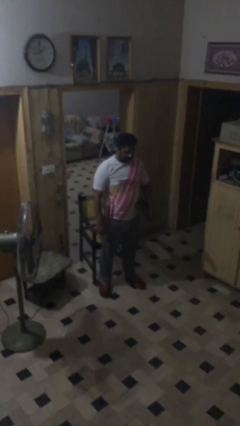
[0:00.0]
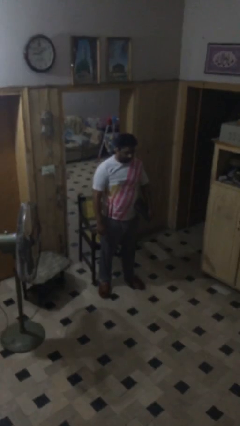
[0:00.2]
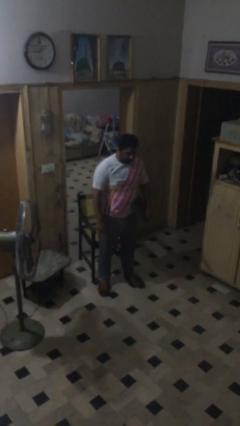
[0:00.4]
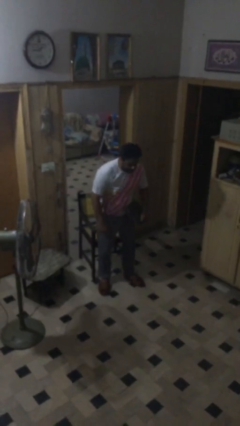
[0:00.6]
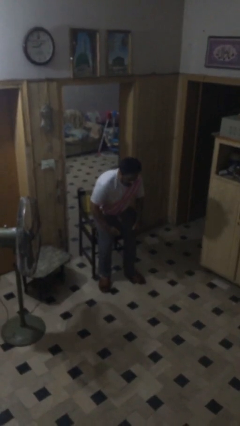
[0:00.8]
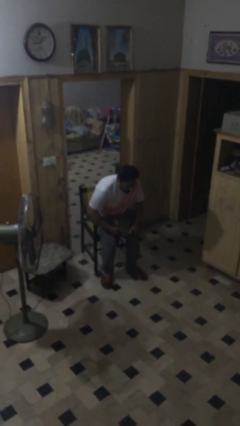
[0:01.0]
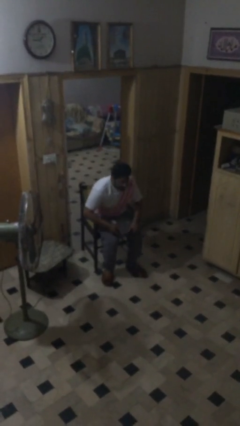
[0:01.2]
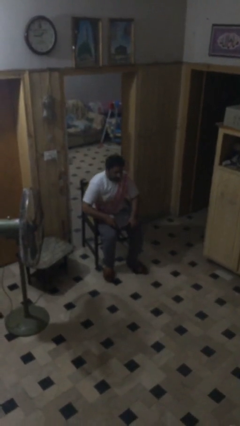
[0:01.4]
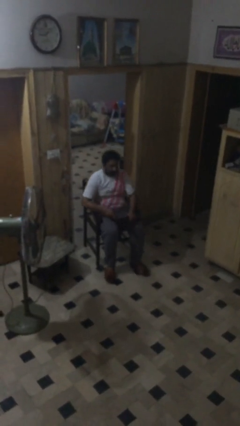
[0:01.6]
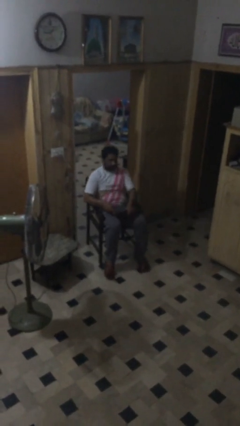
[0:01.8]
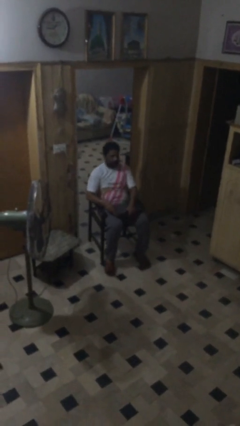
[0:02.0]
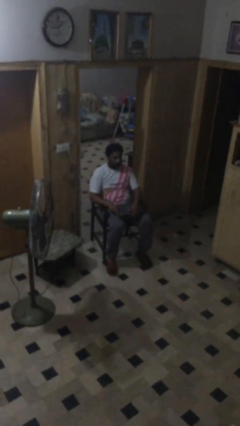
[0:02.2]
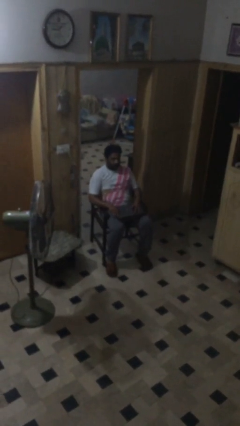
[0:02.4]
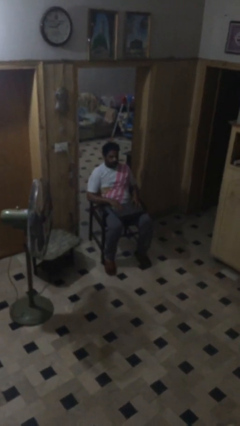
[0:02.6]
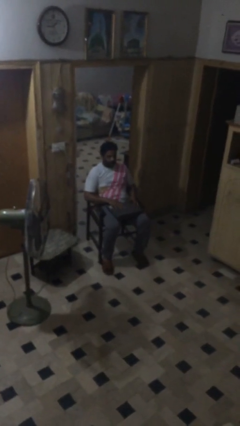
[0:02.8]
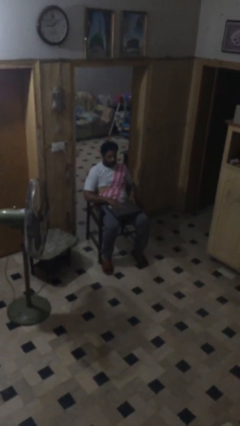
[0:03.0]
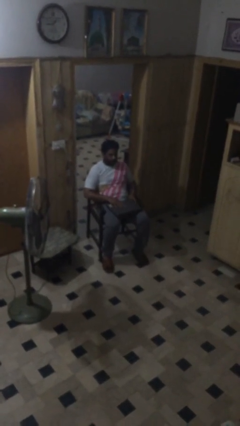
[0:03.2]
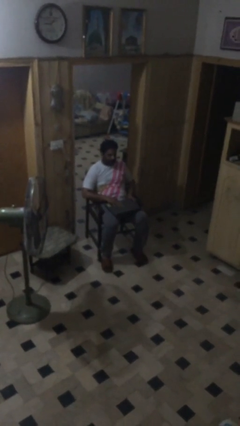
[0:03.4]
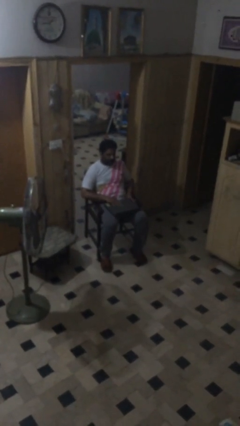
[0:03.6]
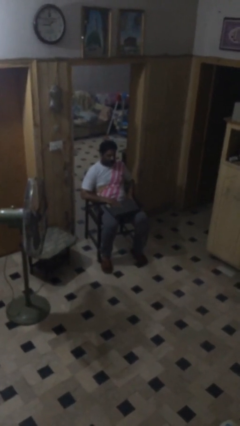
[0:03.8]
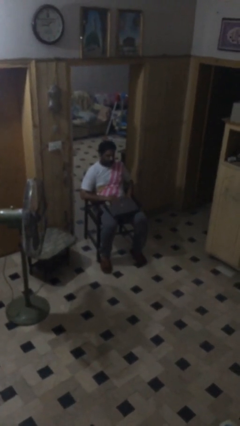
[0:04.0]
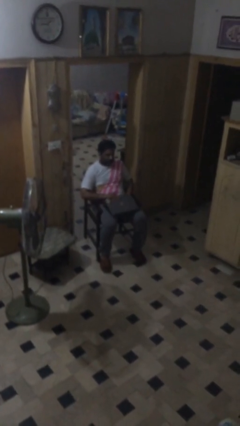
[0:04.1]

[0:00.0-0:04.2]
person sits down

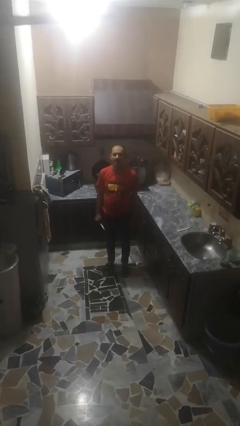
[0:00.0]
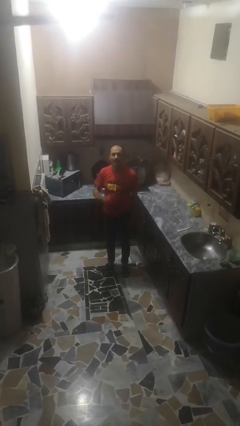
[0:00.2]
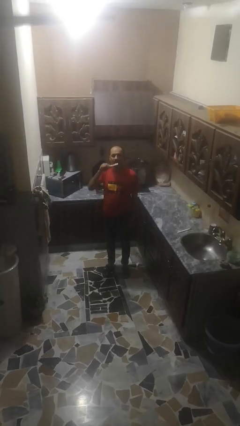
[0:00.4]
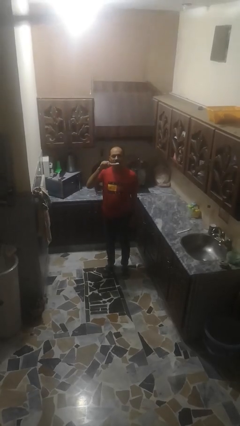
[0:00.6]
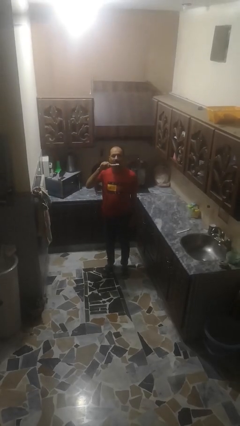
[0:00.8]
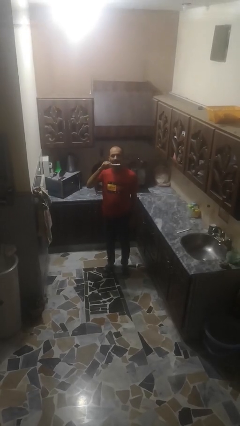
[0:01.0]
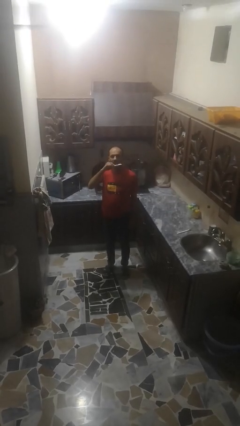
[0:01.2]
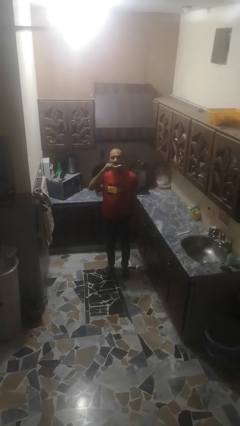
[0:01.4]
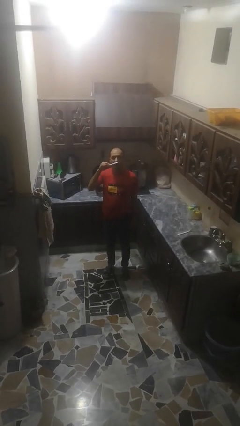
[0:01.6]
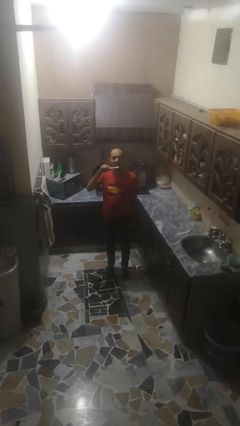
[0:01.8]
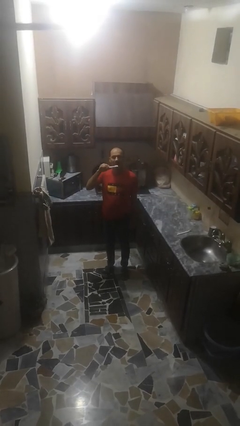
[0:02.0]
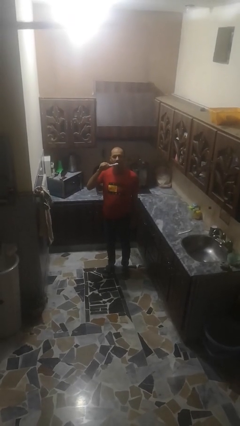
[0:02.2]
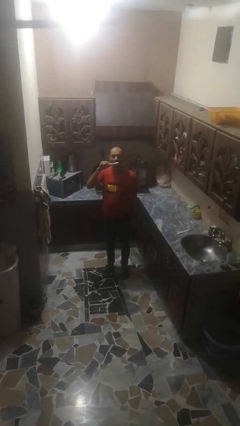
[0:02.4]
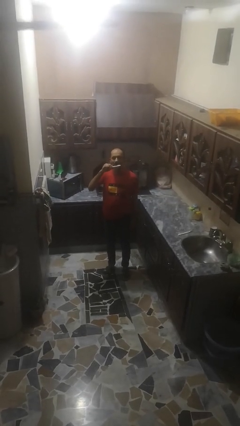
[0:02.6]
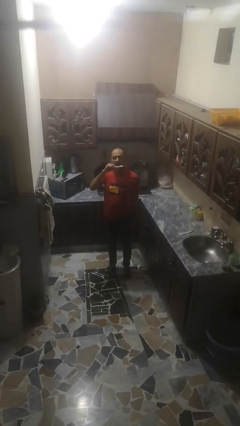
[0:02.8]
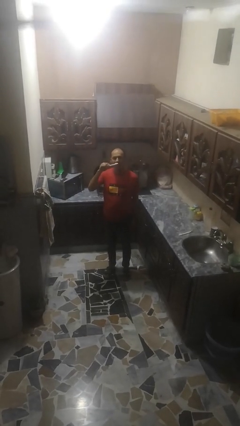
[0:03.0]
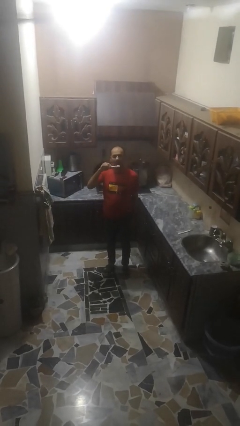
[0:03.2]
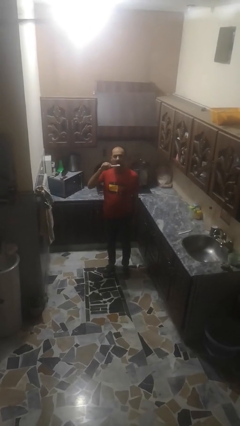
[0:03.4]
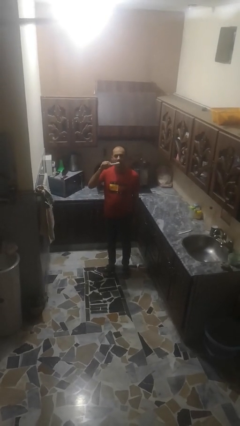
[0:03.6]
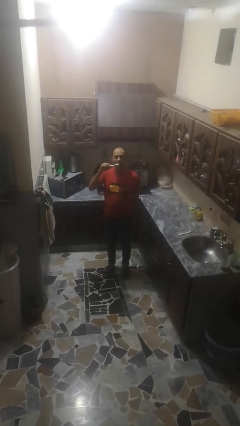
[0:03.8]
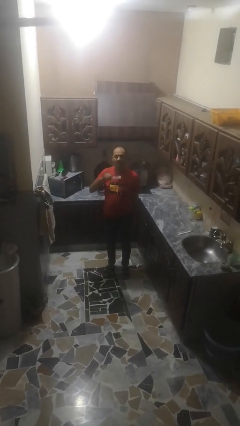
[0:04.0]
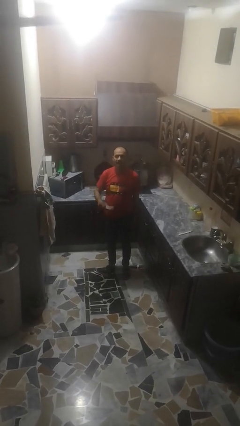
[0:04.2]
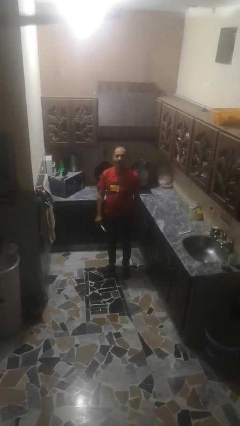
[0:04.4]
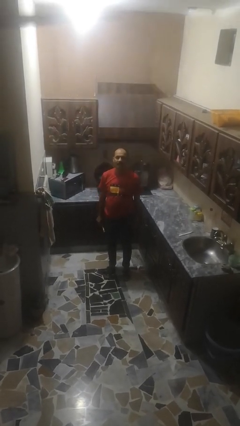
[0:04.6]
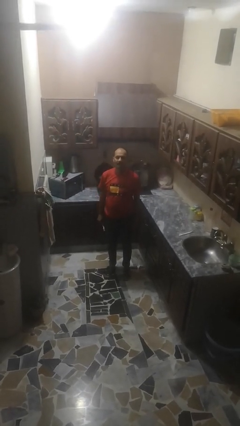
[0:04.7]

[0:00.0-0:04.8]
person brushes teeth

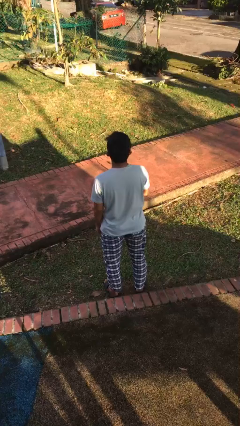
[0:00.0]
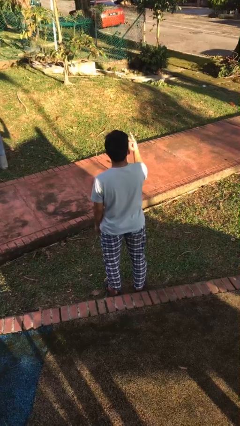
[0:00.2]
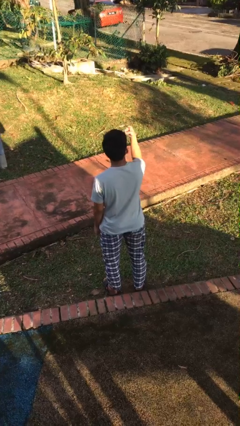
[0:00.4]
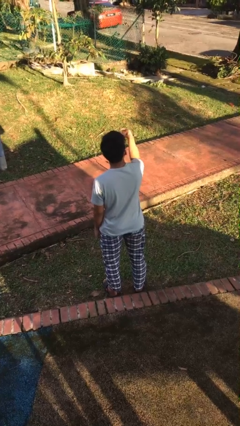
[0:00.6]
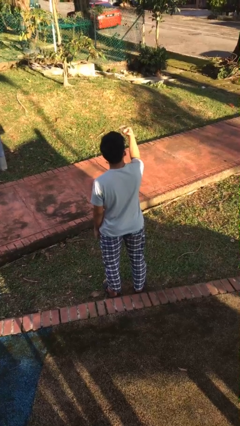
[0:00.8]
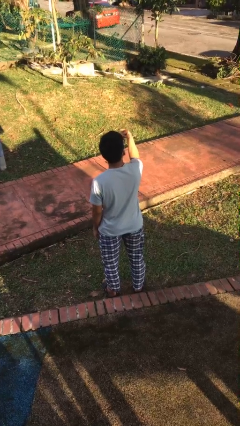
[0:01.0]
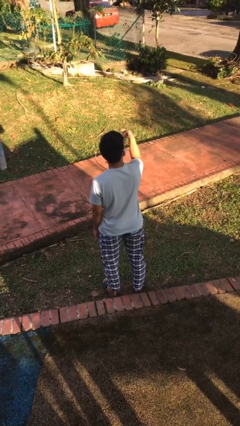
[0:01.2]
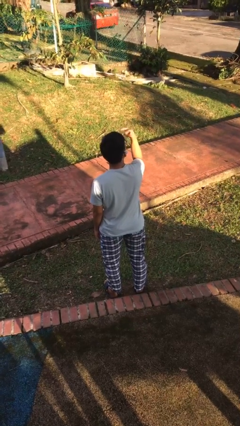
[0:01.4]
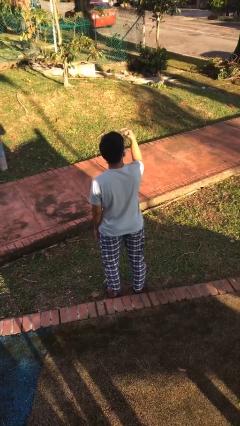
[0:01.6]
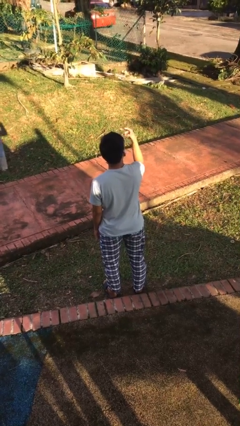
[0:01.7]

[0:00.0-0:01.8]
person gestures watch closely

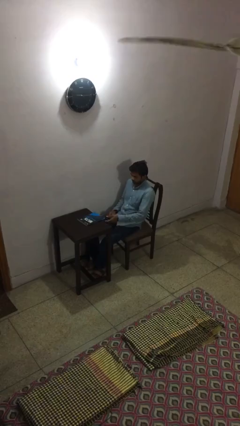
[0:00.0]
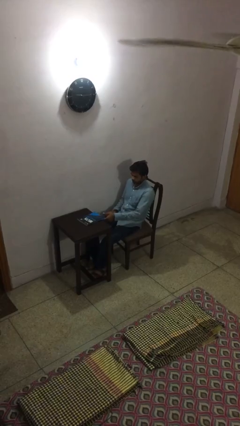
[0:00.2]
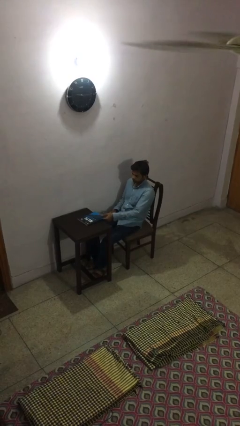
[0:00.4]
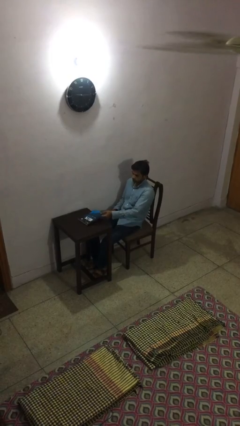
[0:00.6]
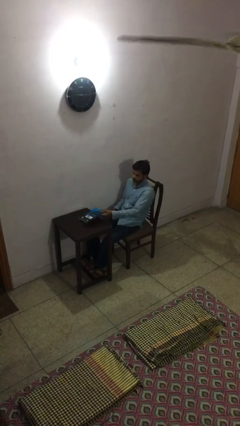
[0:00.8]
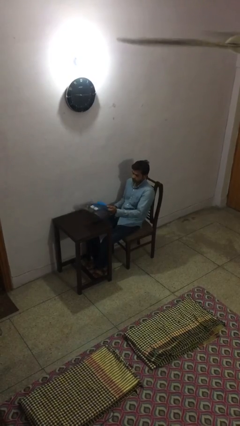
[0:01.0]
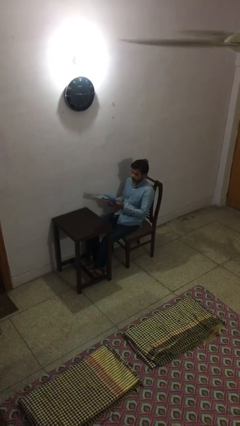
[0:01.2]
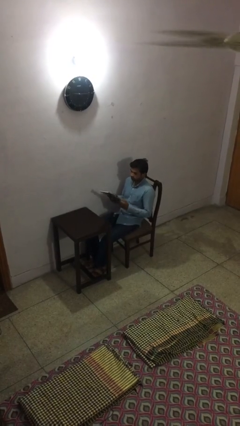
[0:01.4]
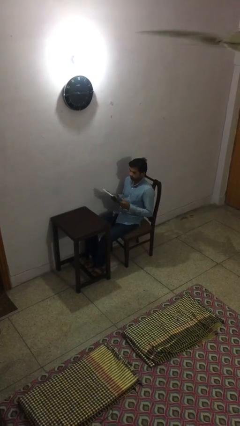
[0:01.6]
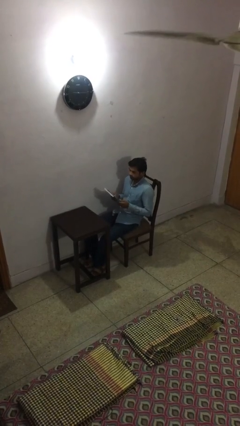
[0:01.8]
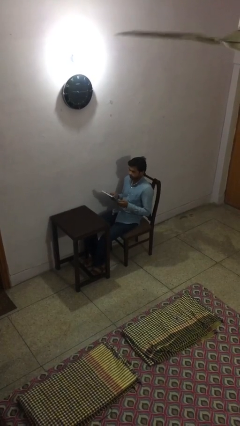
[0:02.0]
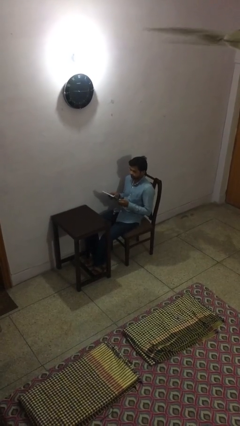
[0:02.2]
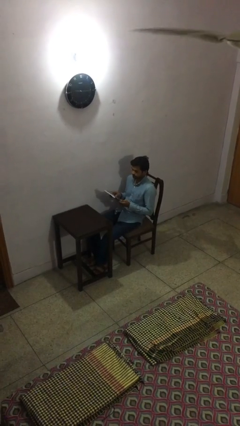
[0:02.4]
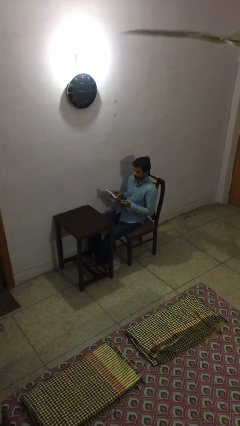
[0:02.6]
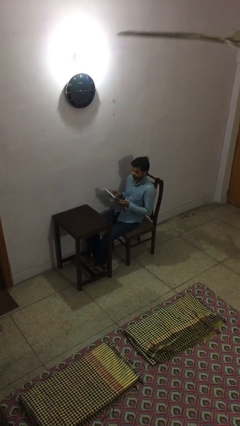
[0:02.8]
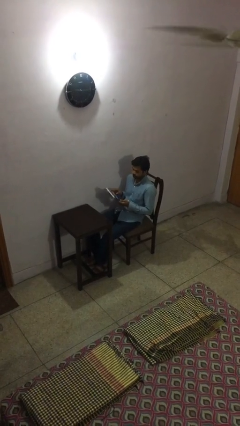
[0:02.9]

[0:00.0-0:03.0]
person picks up object from table

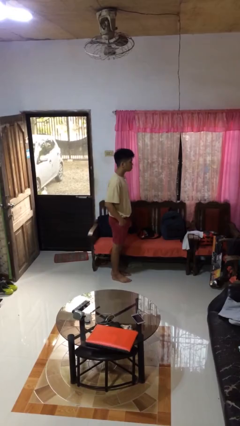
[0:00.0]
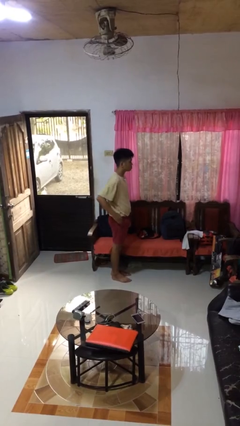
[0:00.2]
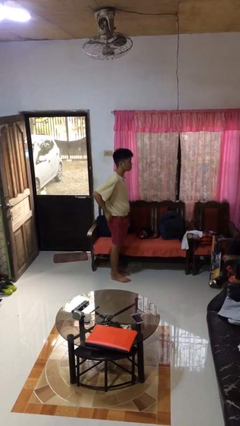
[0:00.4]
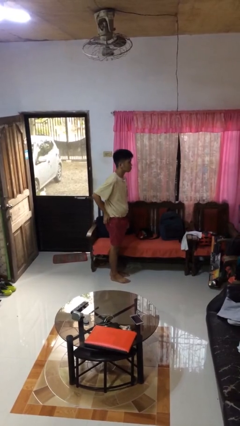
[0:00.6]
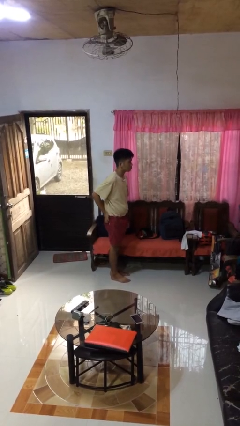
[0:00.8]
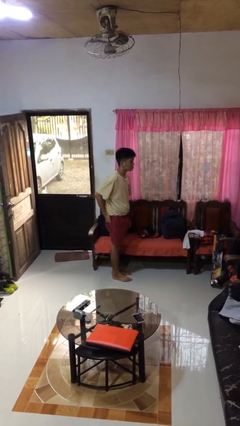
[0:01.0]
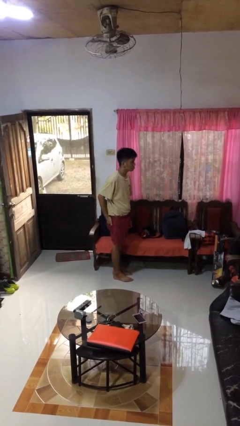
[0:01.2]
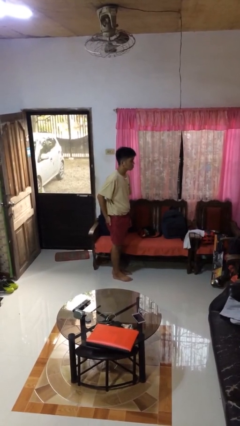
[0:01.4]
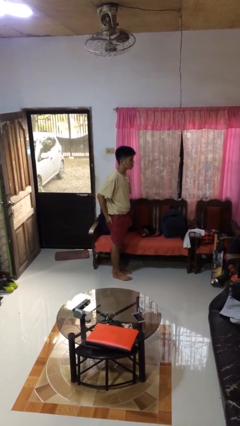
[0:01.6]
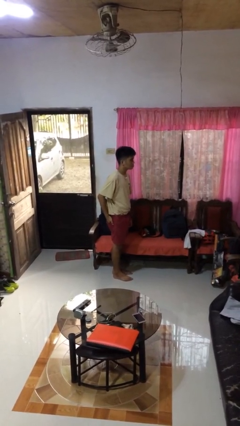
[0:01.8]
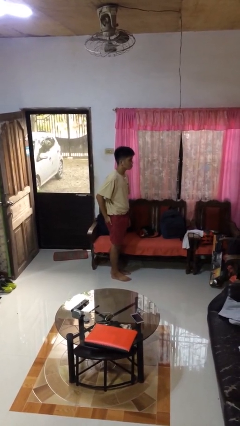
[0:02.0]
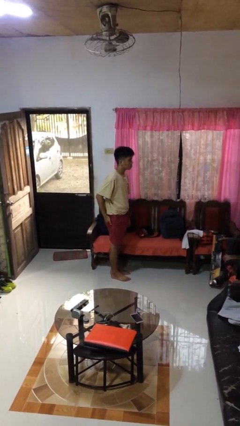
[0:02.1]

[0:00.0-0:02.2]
person puts hands in back pockets

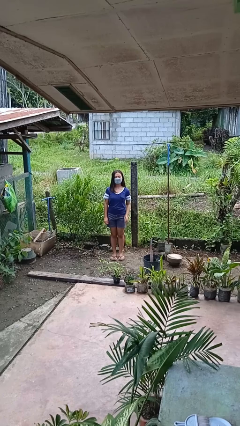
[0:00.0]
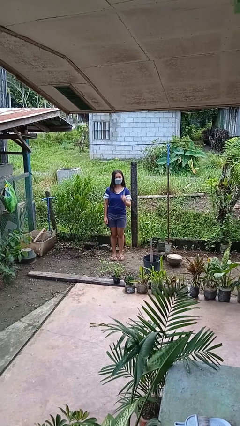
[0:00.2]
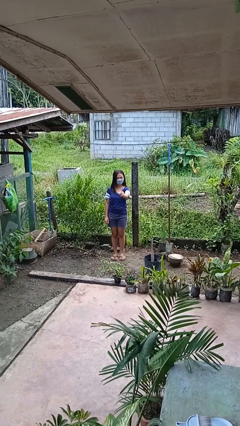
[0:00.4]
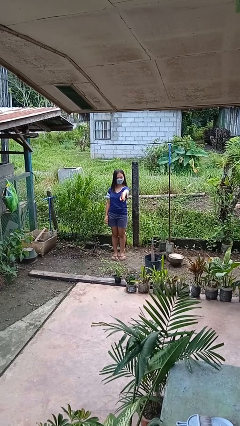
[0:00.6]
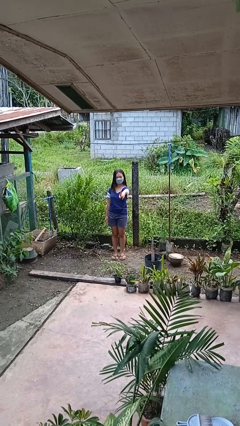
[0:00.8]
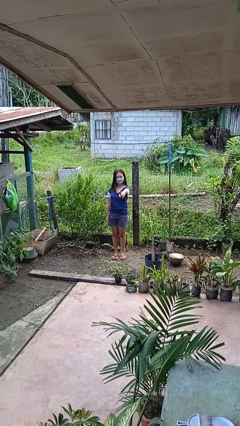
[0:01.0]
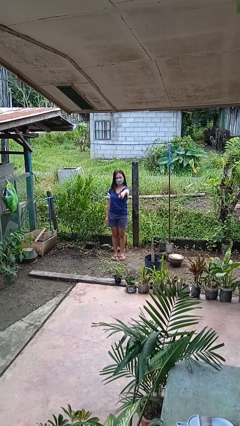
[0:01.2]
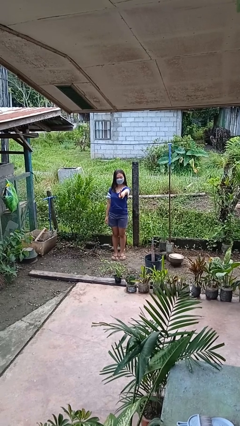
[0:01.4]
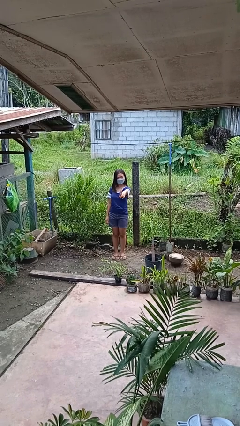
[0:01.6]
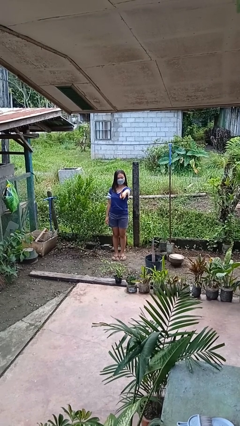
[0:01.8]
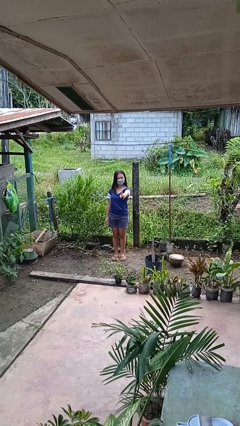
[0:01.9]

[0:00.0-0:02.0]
person gestures number one
